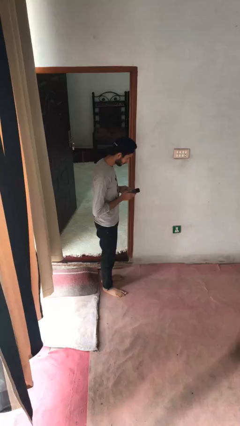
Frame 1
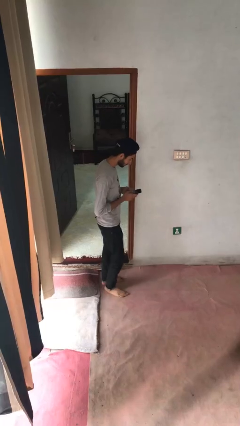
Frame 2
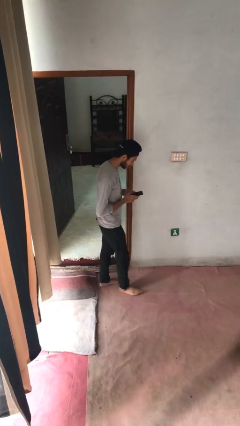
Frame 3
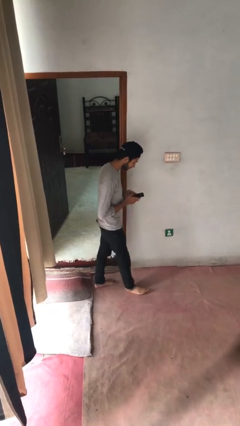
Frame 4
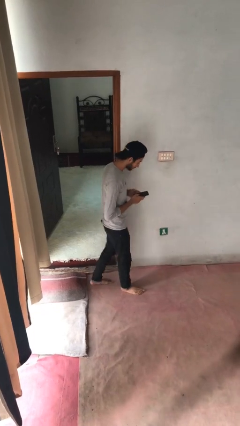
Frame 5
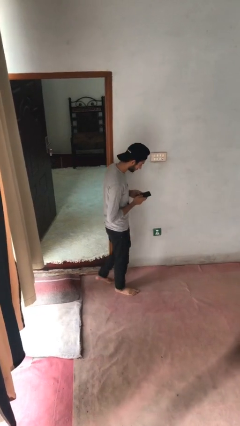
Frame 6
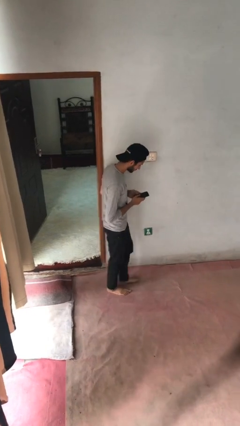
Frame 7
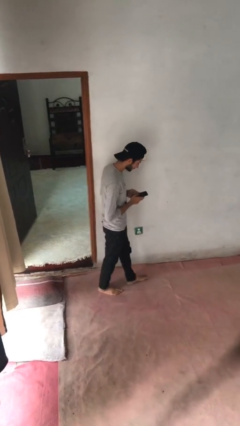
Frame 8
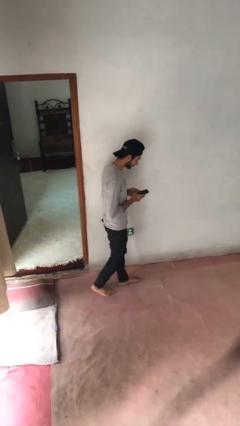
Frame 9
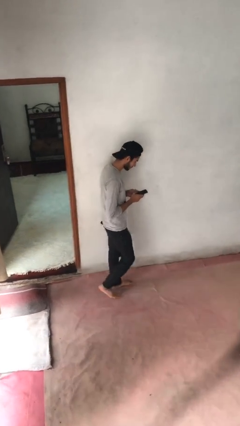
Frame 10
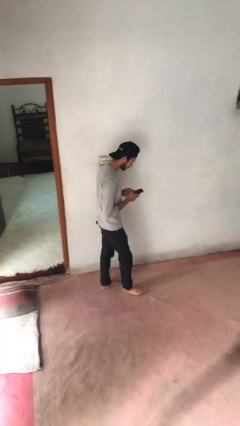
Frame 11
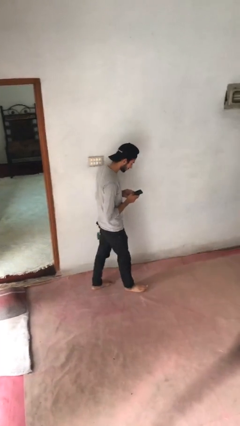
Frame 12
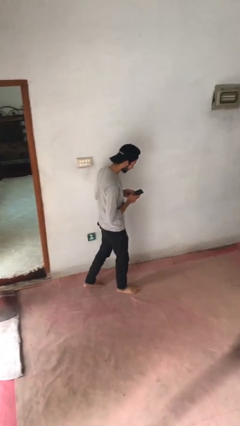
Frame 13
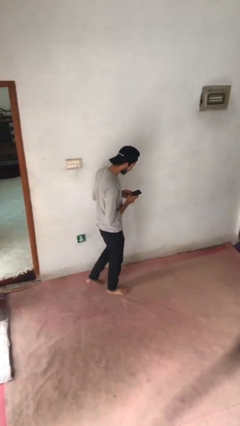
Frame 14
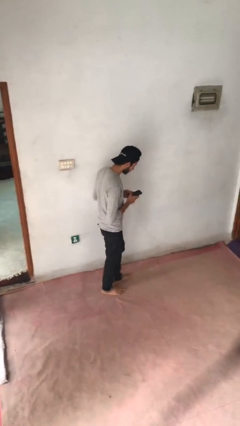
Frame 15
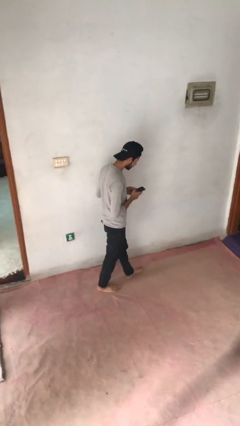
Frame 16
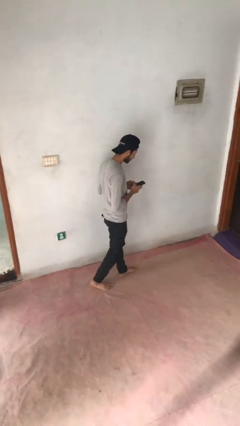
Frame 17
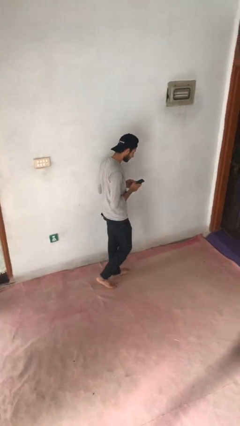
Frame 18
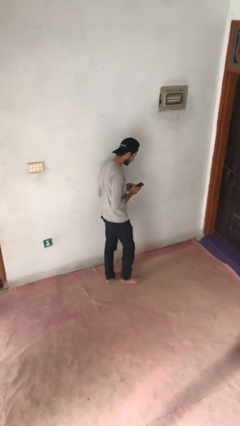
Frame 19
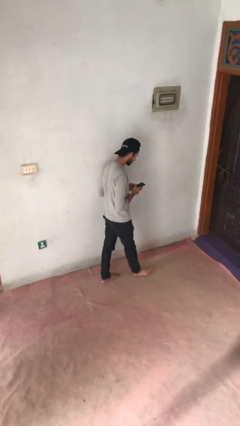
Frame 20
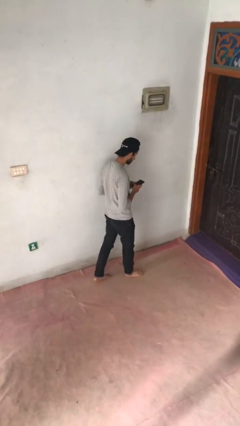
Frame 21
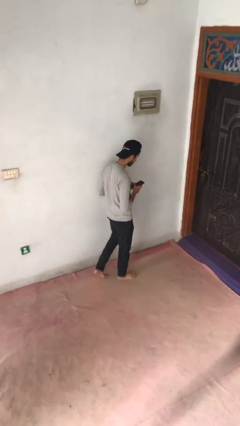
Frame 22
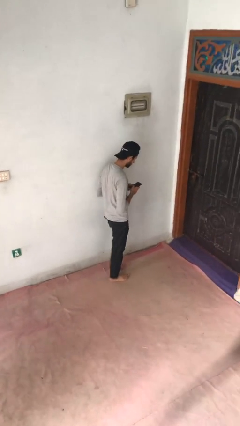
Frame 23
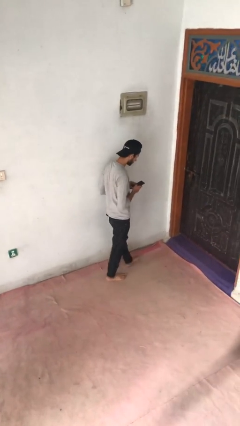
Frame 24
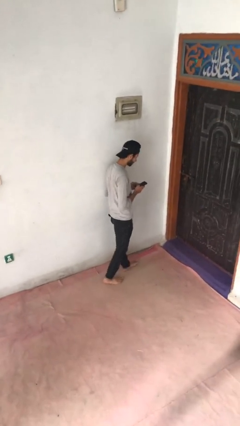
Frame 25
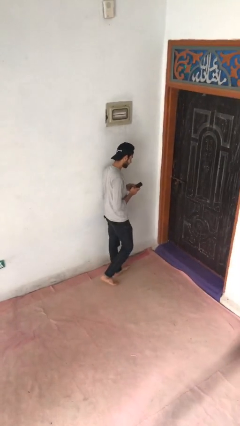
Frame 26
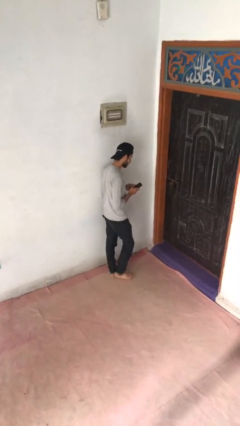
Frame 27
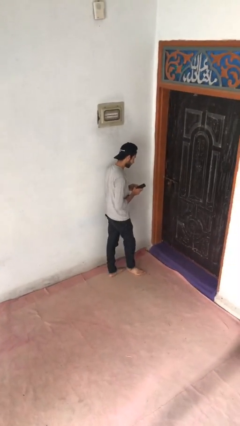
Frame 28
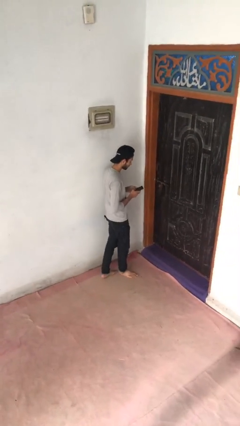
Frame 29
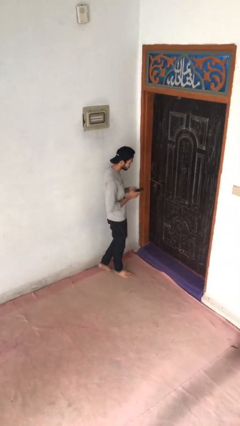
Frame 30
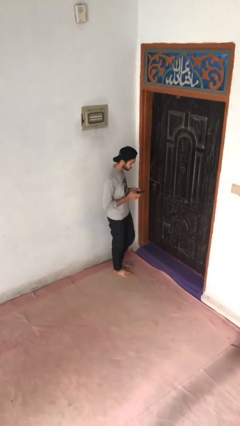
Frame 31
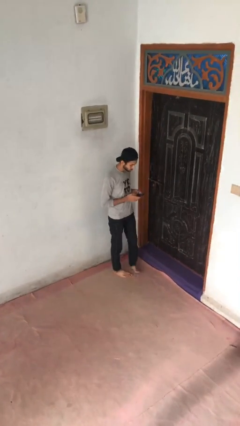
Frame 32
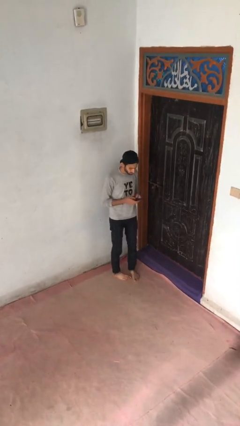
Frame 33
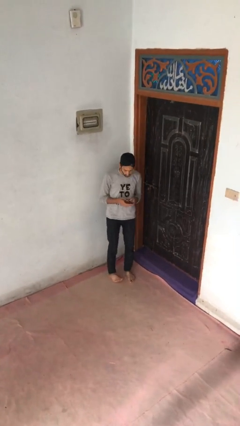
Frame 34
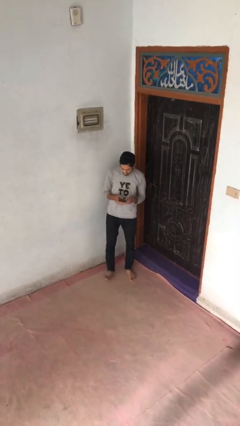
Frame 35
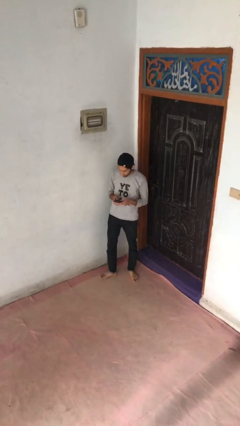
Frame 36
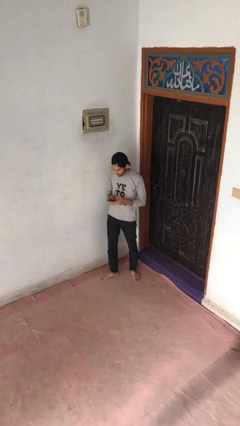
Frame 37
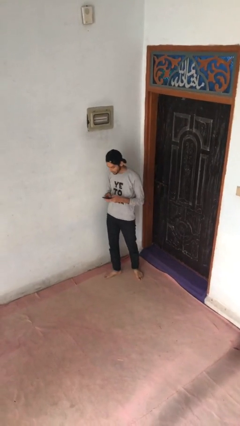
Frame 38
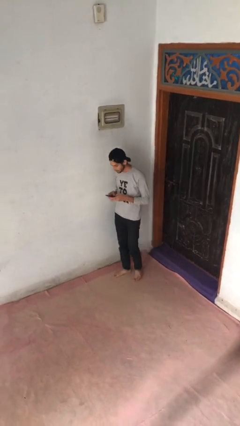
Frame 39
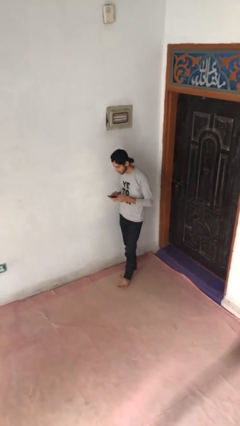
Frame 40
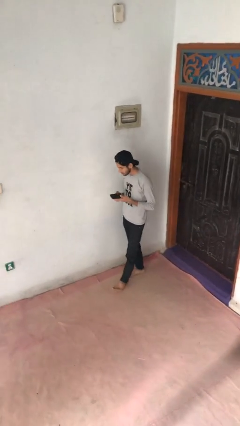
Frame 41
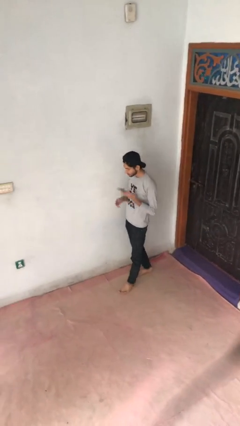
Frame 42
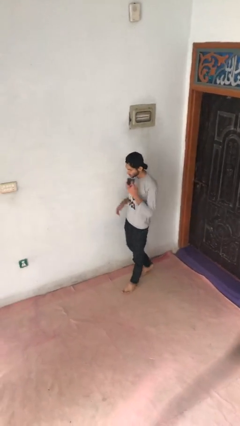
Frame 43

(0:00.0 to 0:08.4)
person texts on phone

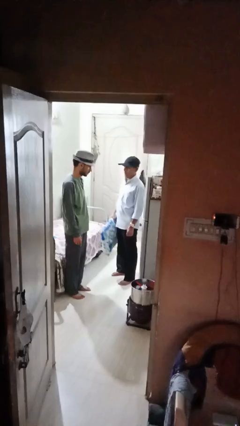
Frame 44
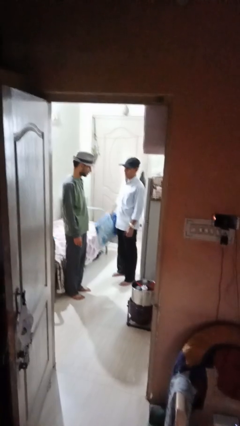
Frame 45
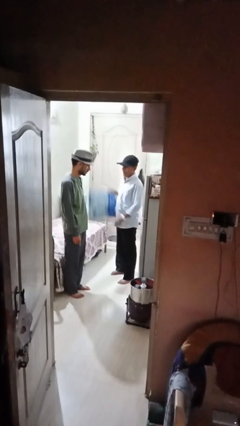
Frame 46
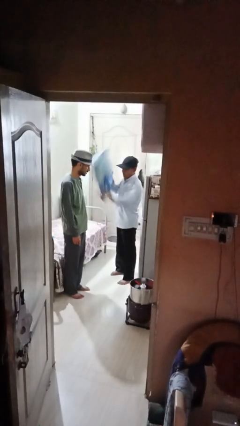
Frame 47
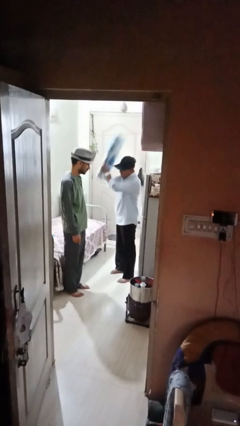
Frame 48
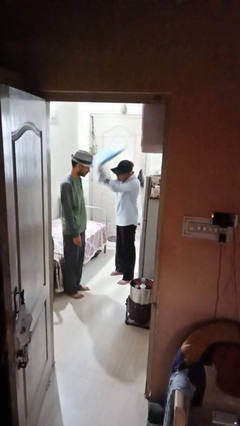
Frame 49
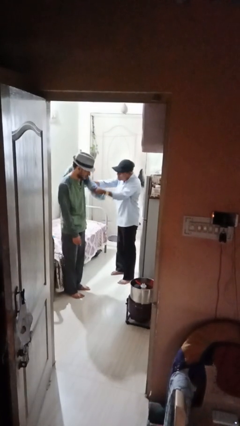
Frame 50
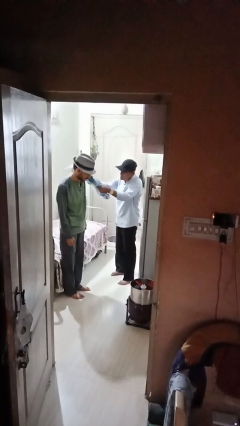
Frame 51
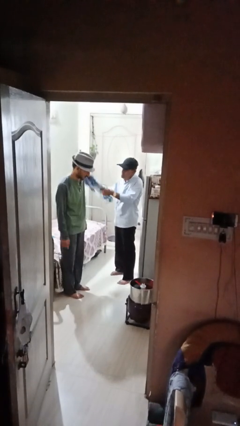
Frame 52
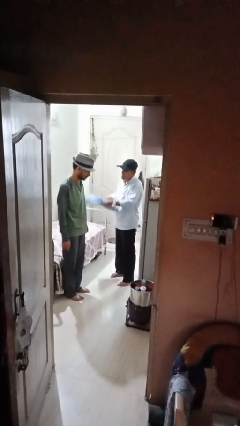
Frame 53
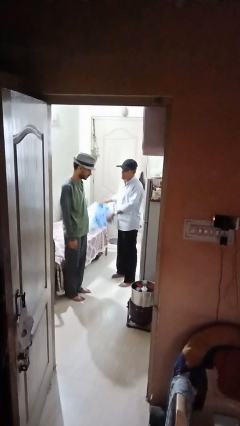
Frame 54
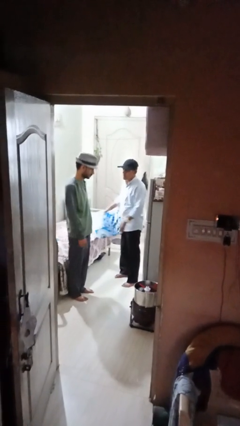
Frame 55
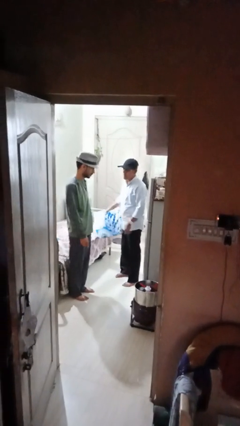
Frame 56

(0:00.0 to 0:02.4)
person hits person with pillow

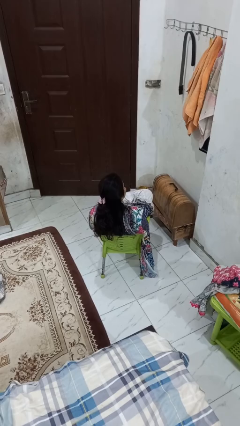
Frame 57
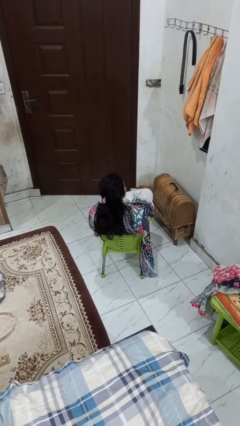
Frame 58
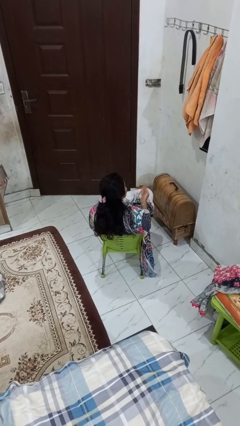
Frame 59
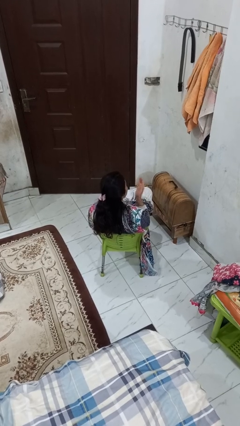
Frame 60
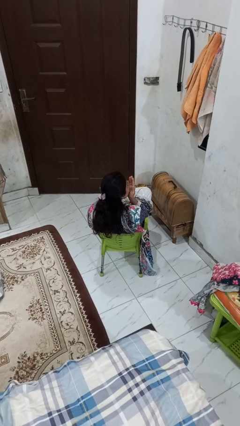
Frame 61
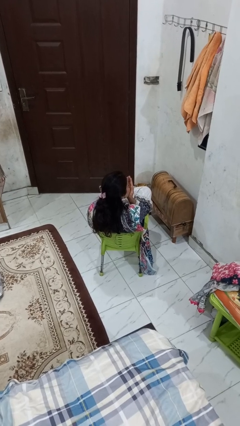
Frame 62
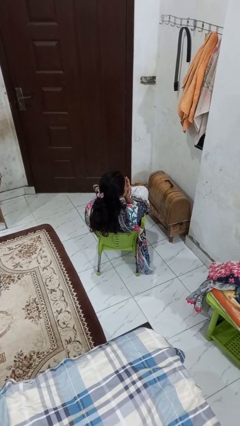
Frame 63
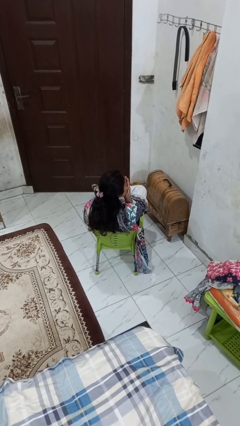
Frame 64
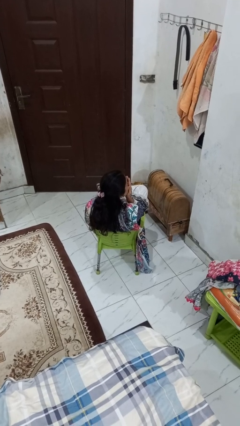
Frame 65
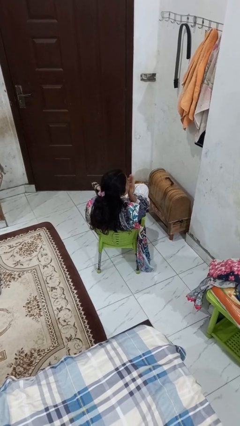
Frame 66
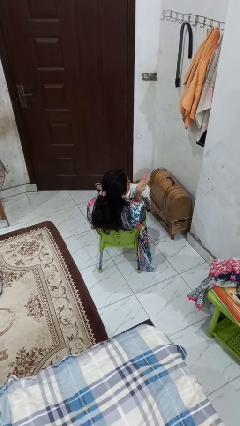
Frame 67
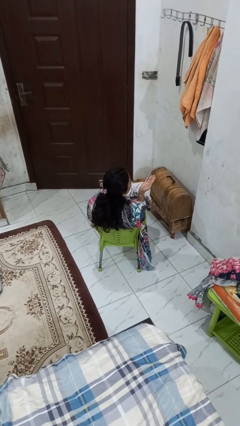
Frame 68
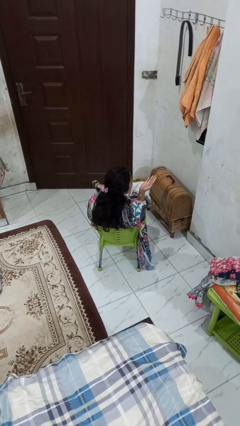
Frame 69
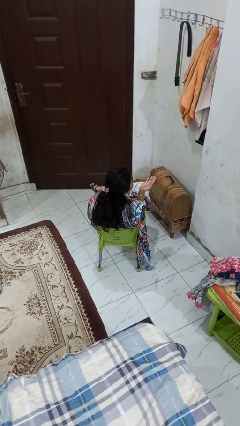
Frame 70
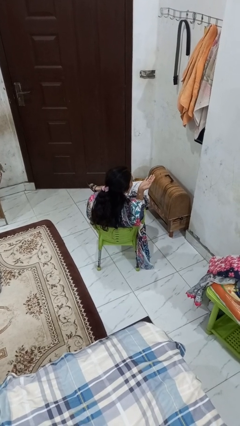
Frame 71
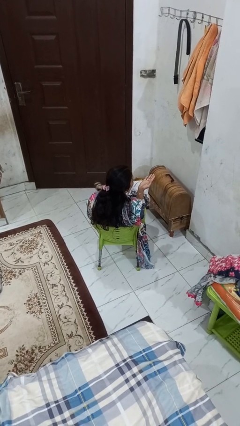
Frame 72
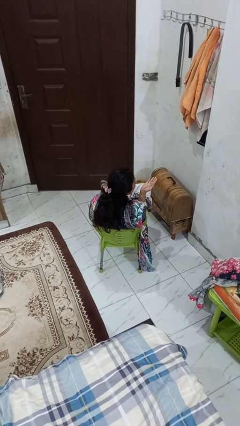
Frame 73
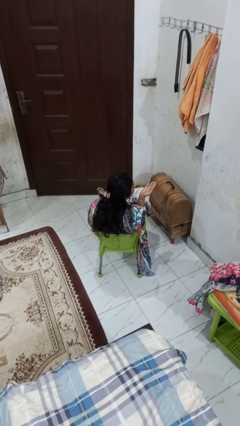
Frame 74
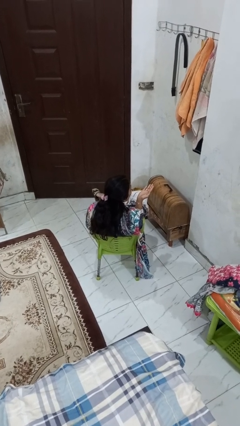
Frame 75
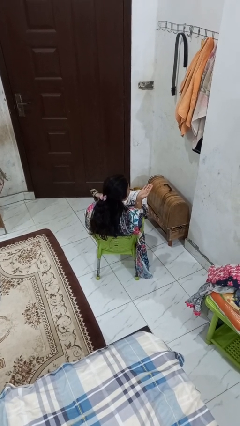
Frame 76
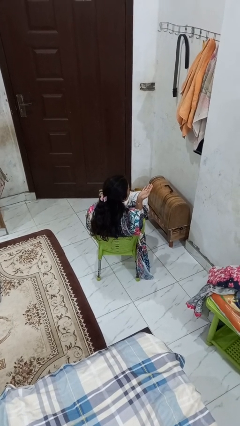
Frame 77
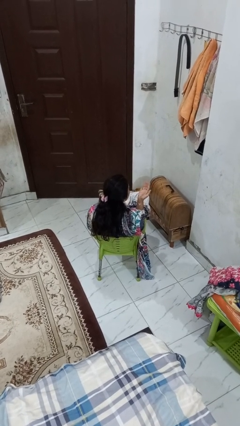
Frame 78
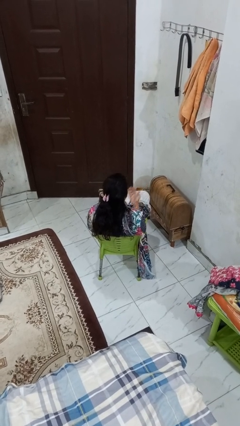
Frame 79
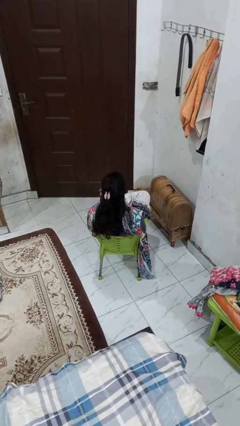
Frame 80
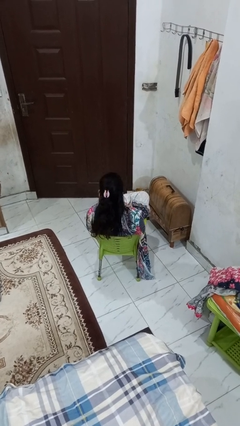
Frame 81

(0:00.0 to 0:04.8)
person gestures blow kiss

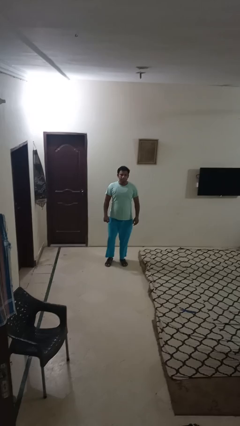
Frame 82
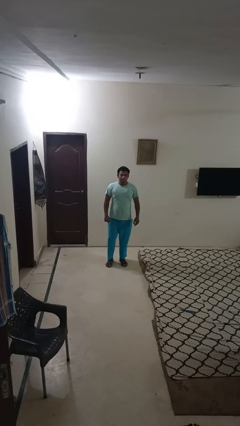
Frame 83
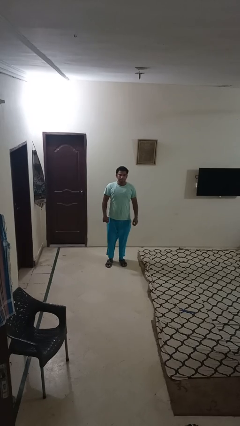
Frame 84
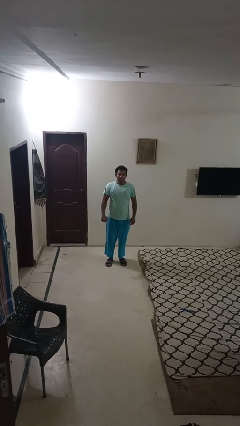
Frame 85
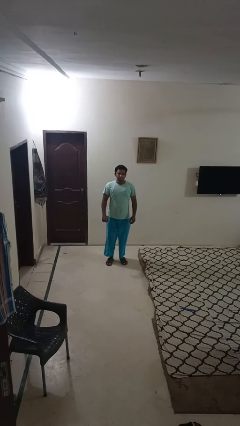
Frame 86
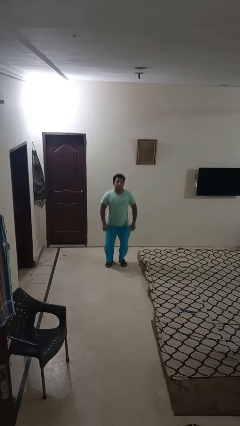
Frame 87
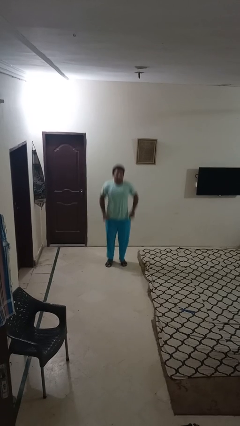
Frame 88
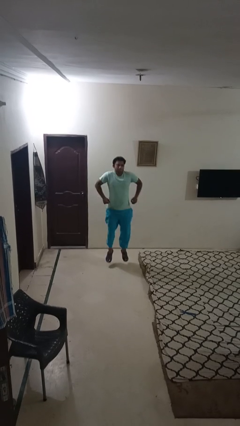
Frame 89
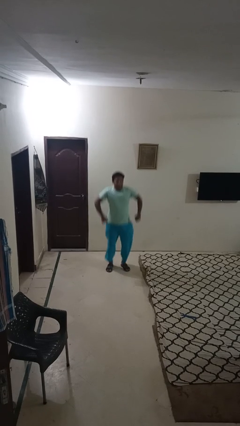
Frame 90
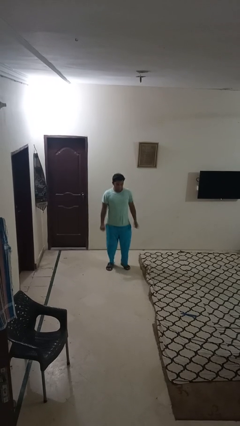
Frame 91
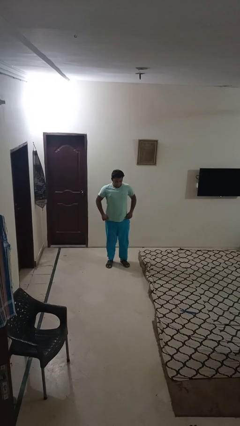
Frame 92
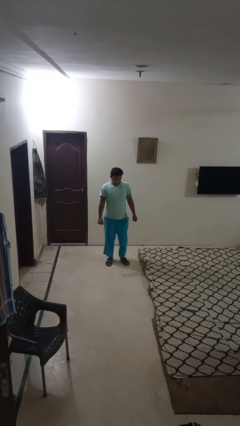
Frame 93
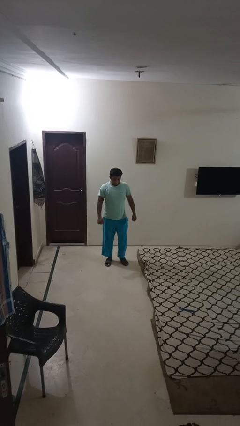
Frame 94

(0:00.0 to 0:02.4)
person jumps
